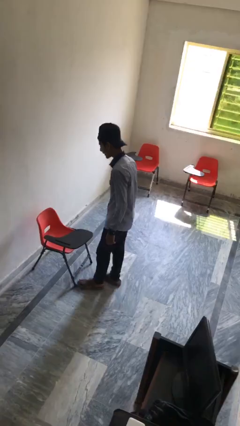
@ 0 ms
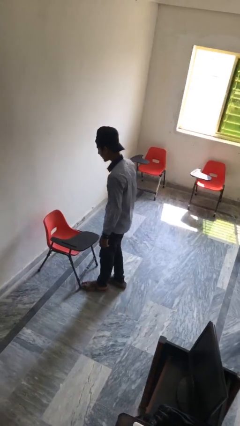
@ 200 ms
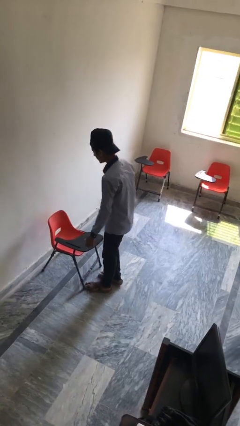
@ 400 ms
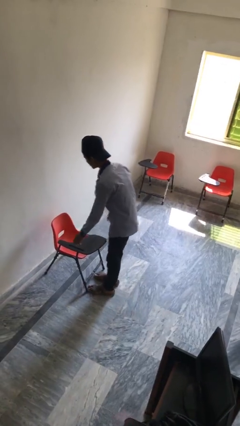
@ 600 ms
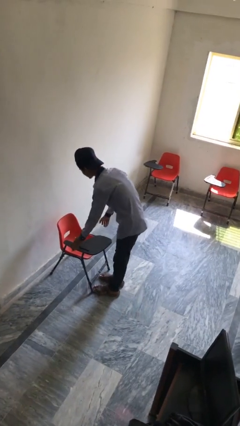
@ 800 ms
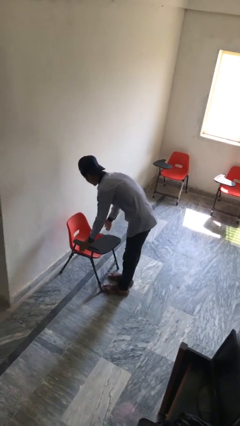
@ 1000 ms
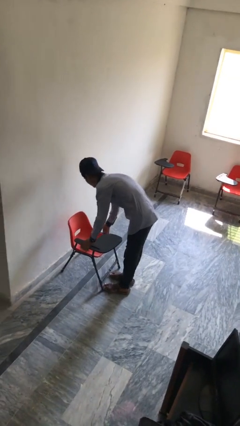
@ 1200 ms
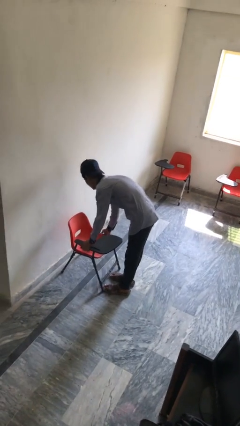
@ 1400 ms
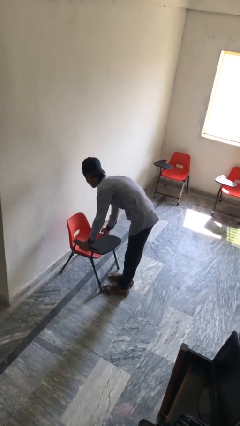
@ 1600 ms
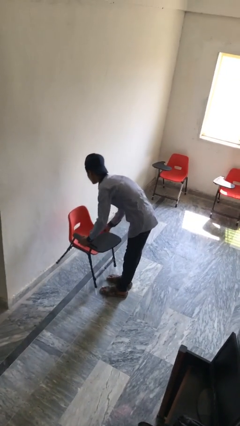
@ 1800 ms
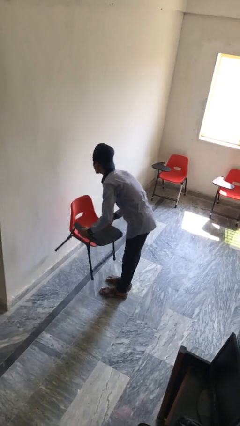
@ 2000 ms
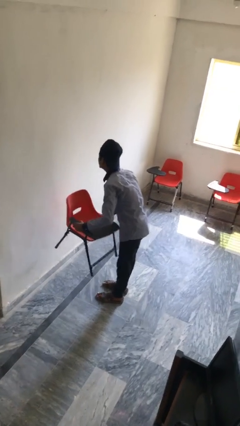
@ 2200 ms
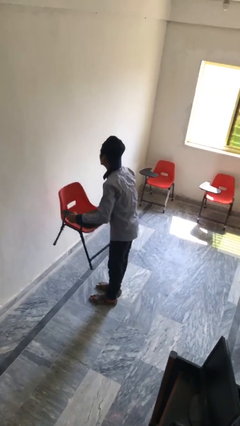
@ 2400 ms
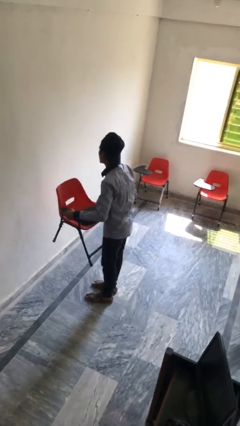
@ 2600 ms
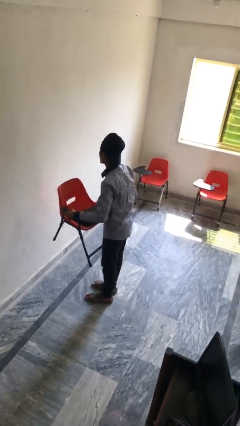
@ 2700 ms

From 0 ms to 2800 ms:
person picks up object from floor

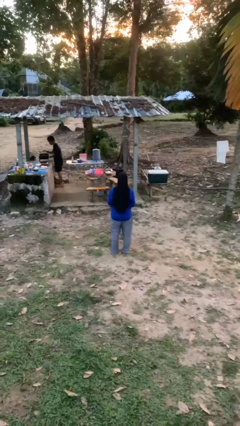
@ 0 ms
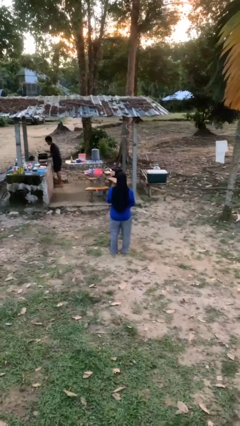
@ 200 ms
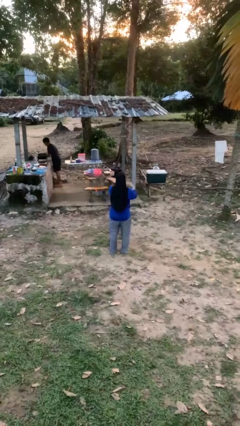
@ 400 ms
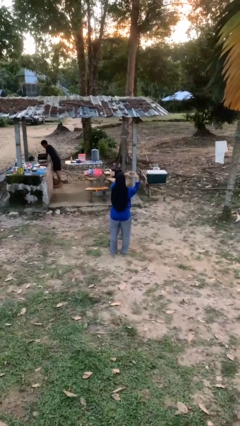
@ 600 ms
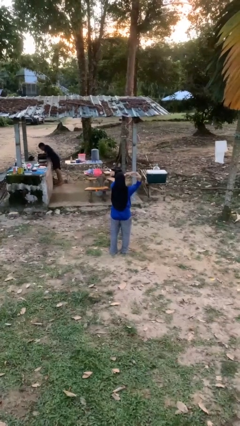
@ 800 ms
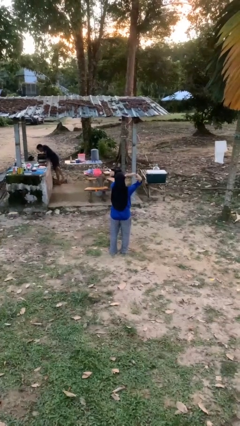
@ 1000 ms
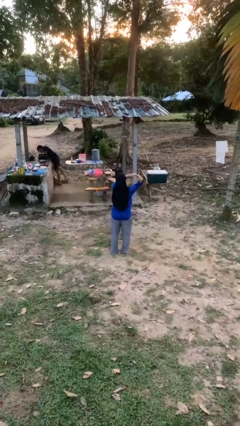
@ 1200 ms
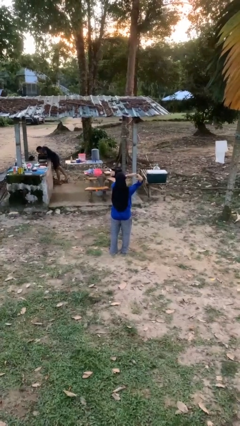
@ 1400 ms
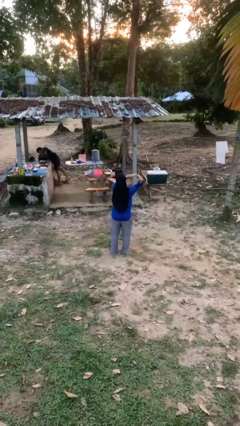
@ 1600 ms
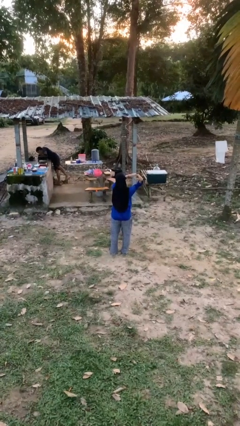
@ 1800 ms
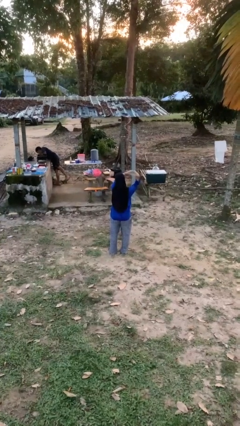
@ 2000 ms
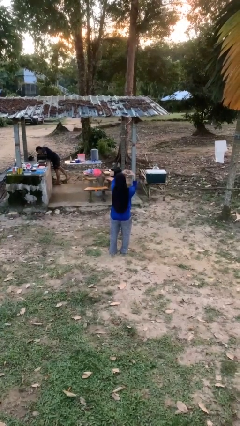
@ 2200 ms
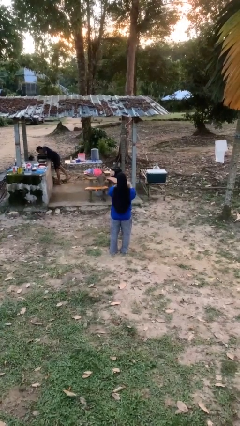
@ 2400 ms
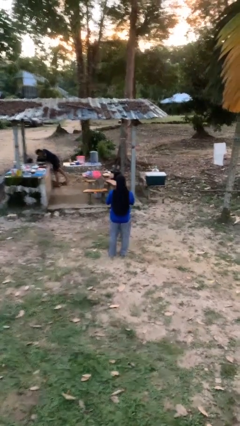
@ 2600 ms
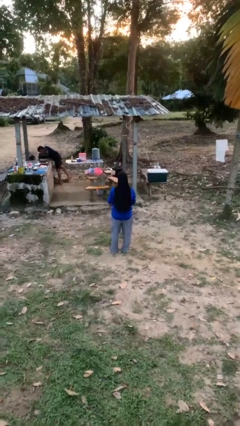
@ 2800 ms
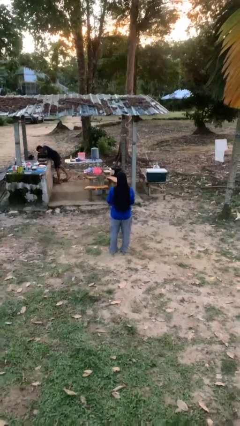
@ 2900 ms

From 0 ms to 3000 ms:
person gestures heart

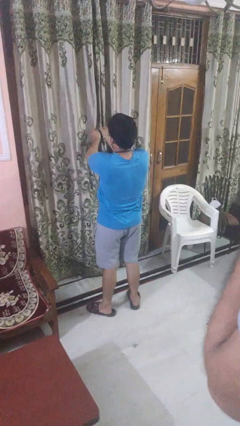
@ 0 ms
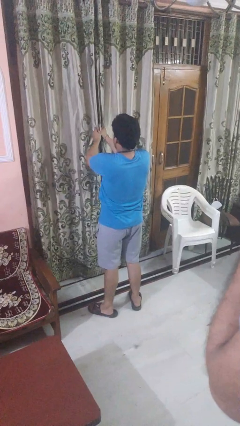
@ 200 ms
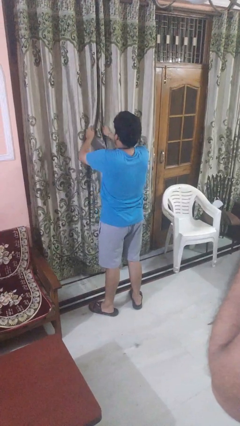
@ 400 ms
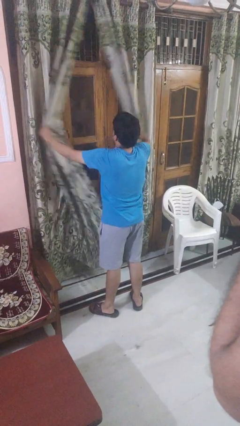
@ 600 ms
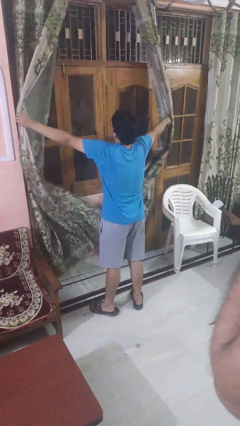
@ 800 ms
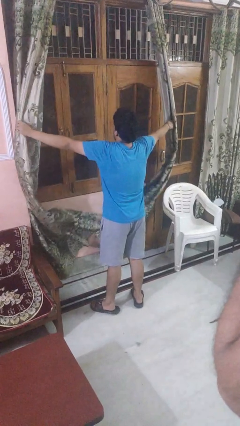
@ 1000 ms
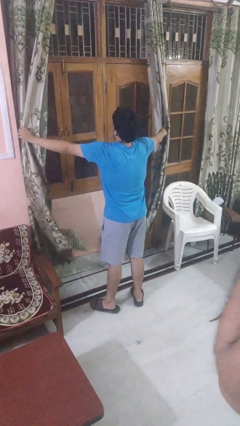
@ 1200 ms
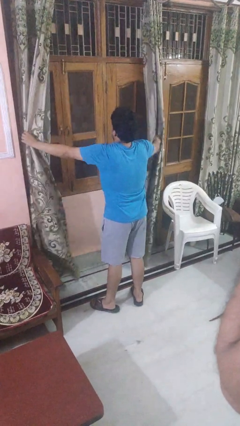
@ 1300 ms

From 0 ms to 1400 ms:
person opens curtains

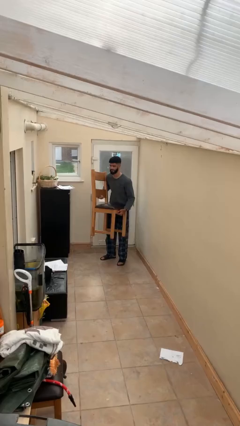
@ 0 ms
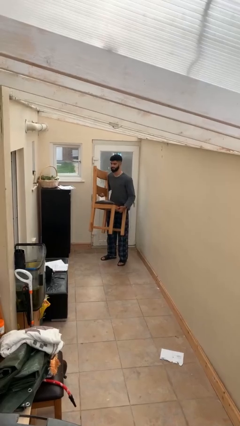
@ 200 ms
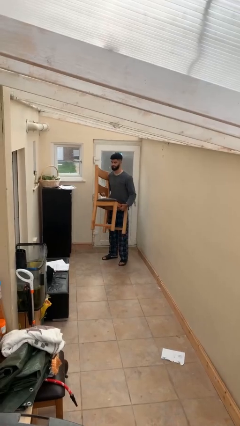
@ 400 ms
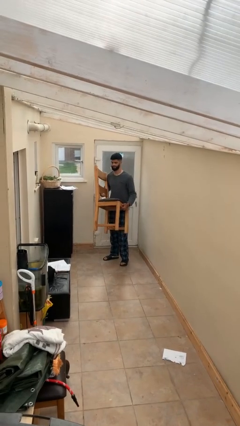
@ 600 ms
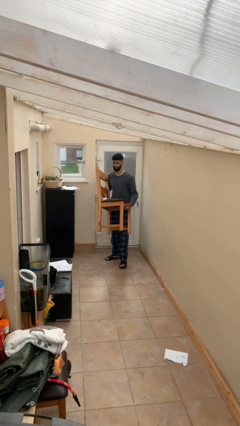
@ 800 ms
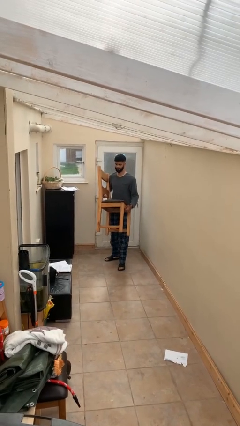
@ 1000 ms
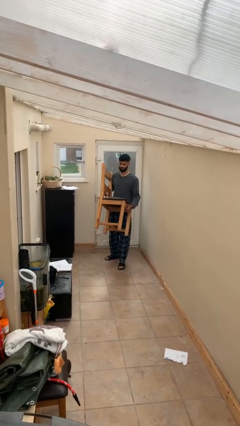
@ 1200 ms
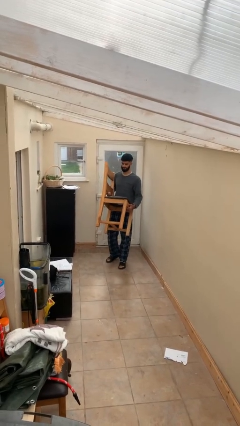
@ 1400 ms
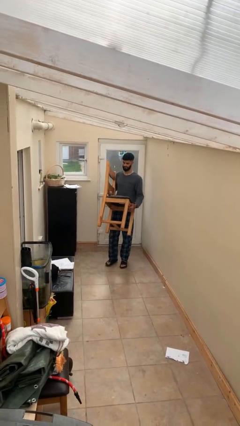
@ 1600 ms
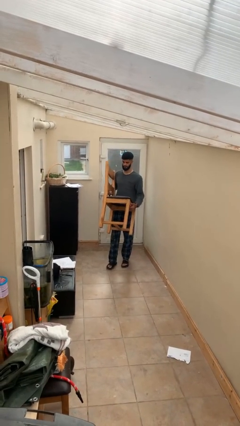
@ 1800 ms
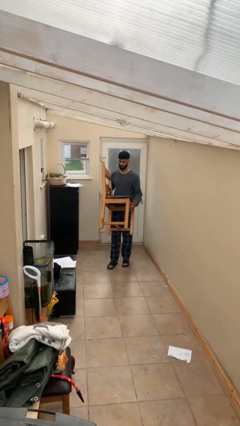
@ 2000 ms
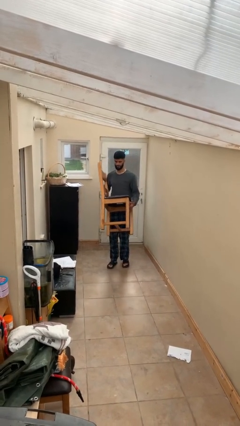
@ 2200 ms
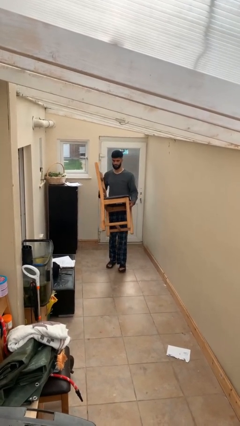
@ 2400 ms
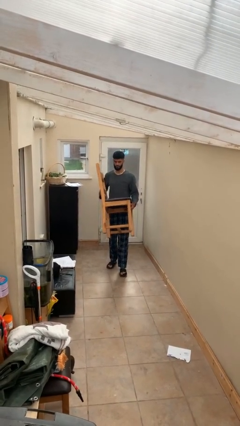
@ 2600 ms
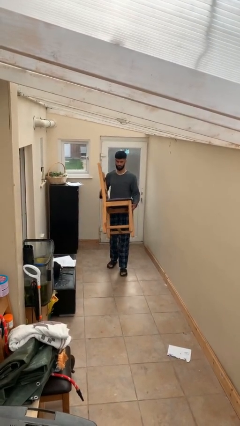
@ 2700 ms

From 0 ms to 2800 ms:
person carries heavy object

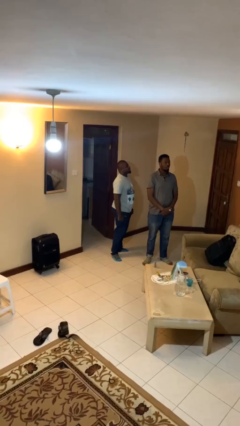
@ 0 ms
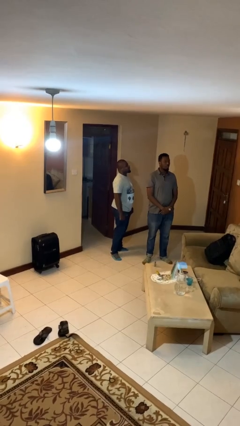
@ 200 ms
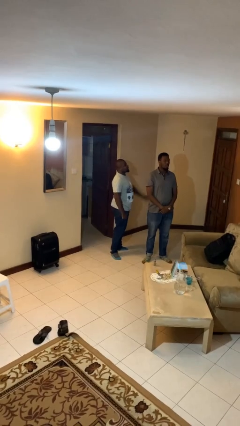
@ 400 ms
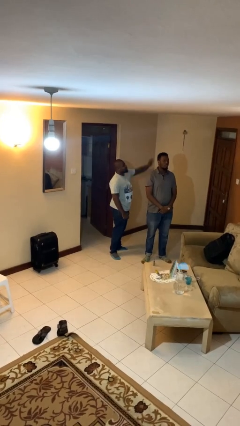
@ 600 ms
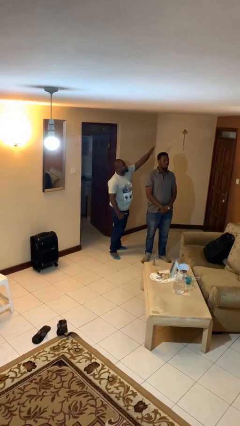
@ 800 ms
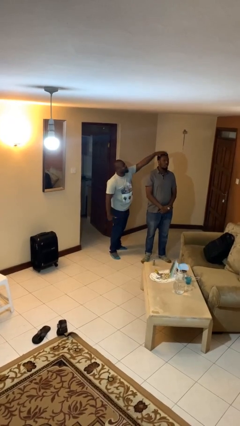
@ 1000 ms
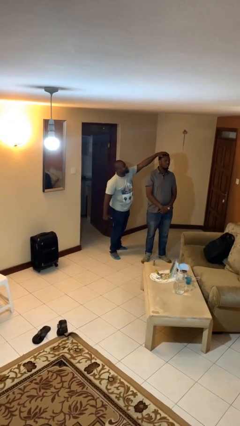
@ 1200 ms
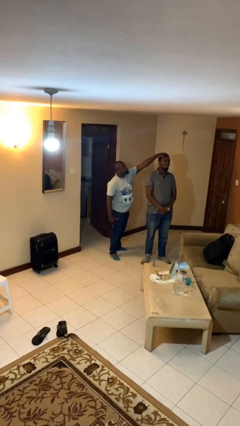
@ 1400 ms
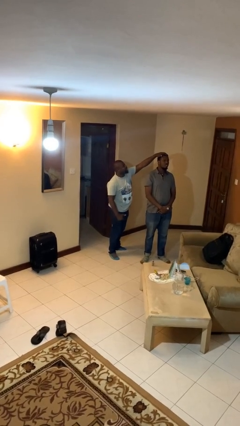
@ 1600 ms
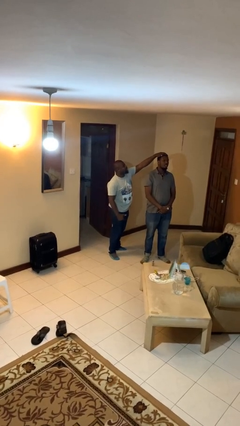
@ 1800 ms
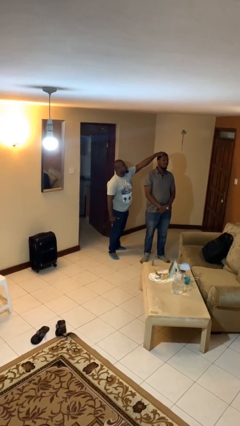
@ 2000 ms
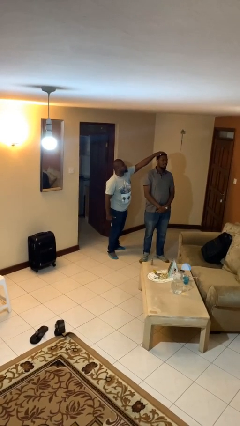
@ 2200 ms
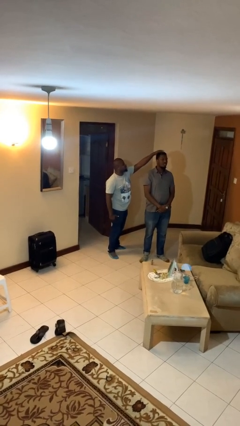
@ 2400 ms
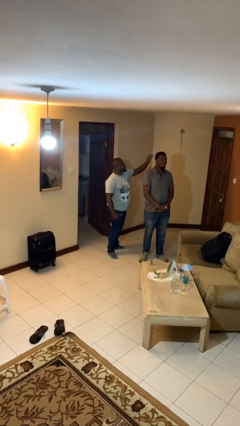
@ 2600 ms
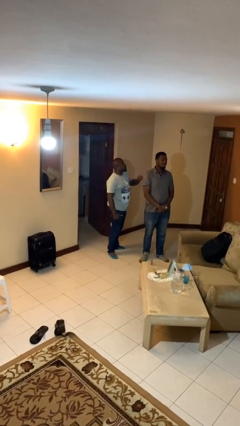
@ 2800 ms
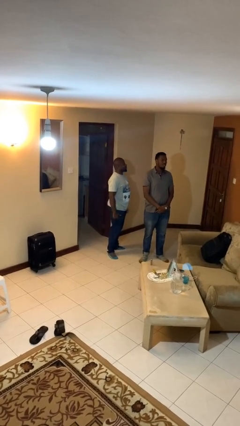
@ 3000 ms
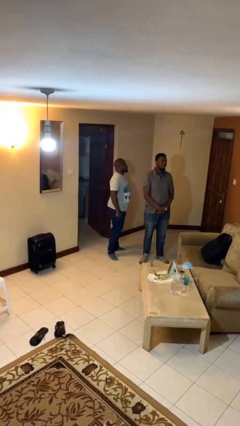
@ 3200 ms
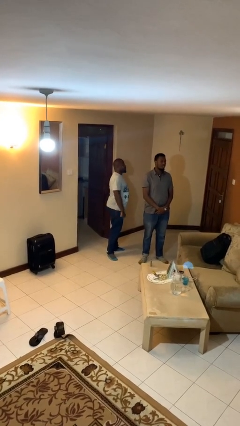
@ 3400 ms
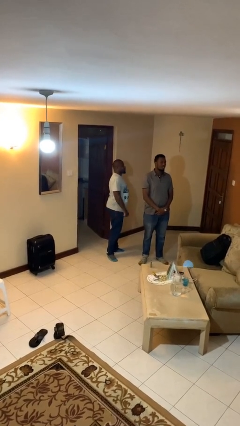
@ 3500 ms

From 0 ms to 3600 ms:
person grabs person by hair

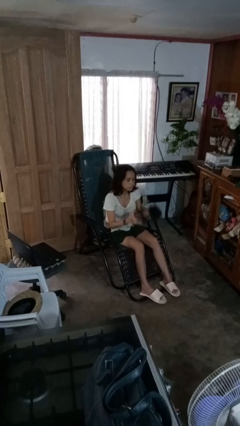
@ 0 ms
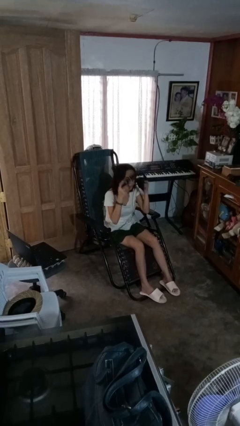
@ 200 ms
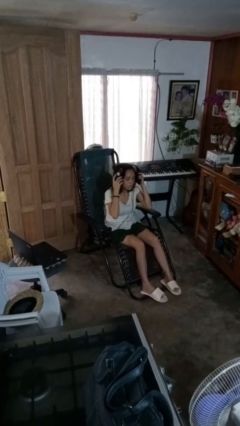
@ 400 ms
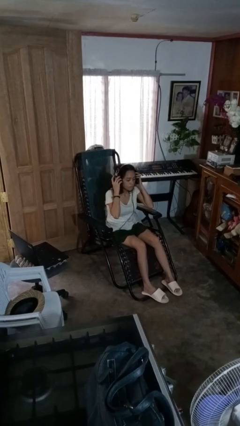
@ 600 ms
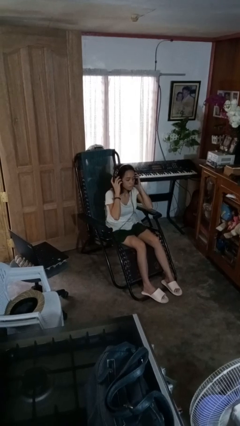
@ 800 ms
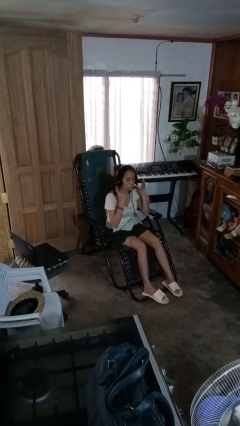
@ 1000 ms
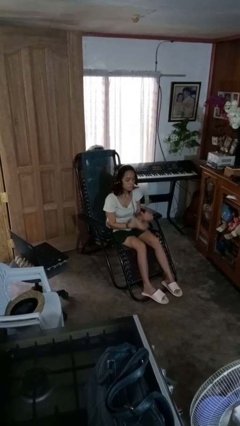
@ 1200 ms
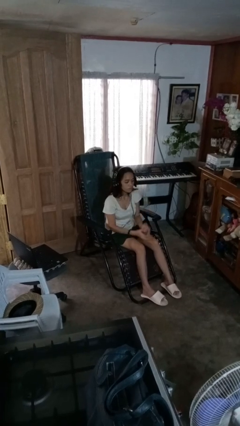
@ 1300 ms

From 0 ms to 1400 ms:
person puts on headphones

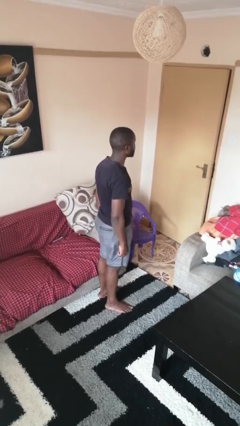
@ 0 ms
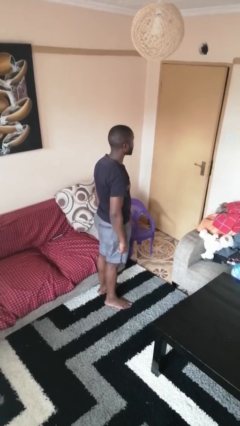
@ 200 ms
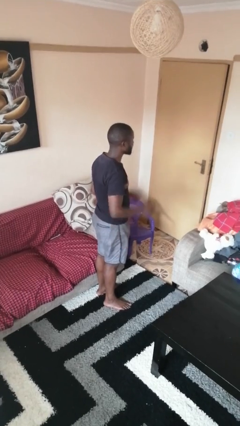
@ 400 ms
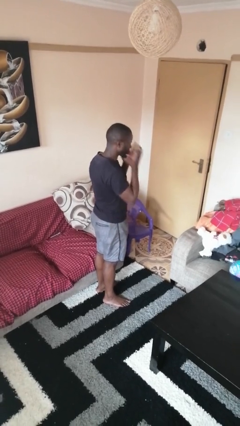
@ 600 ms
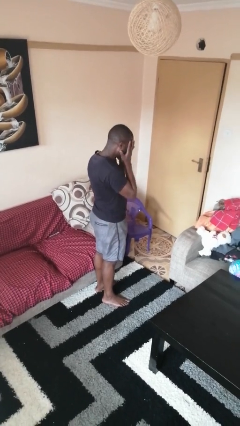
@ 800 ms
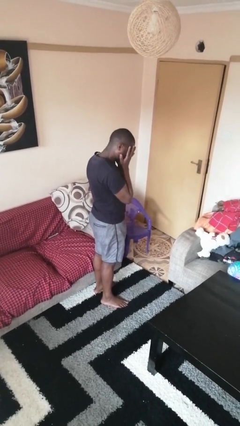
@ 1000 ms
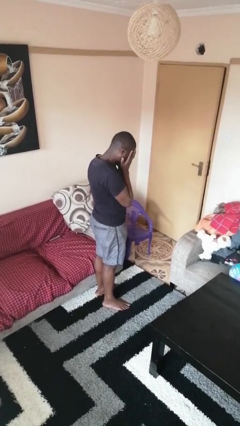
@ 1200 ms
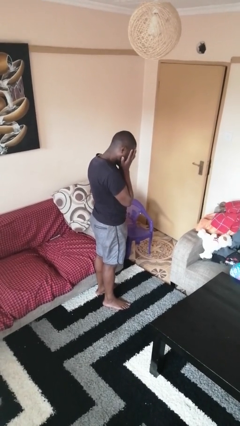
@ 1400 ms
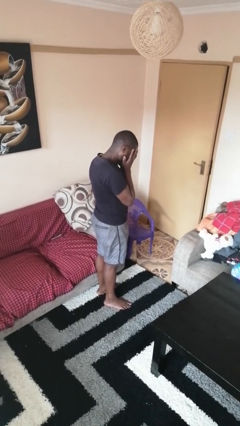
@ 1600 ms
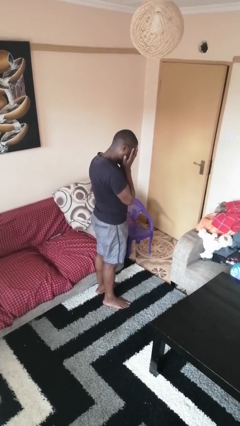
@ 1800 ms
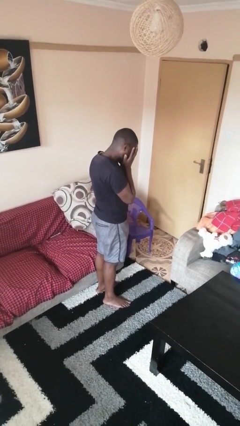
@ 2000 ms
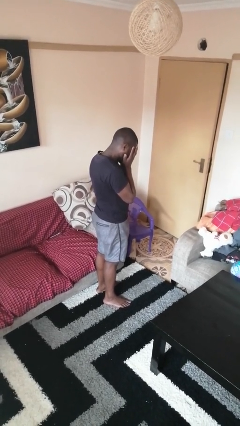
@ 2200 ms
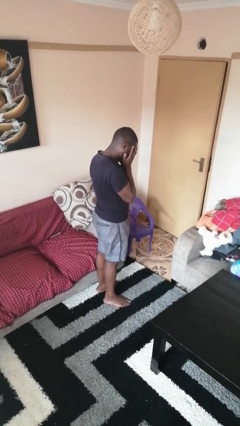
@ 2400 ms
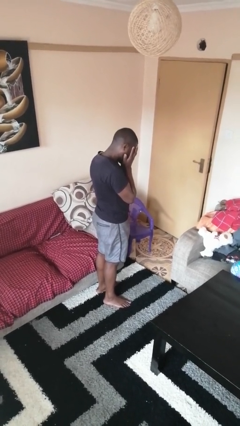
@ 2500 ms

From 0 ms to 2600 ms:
person covers face with hands
